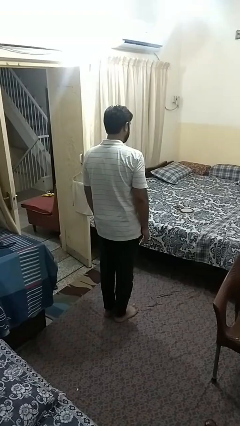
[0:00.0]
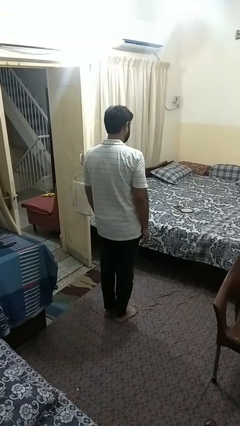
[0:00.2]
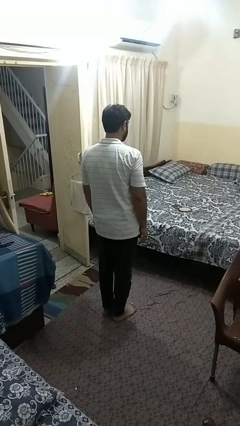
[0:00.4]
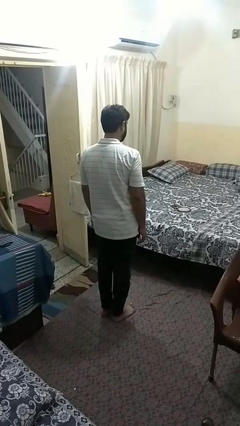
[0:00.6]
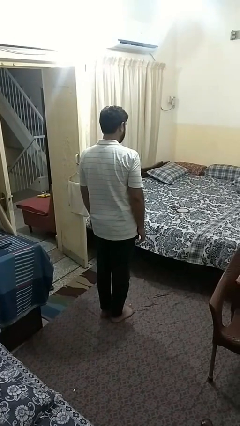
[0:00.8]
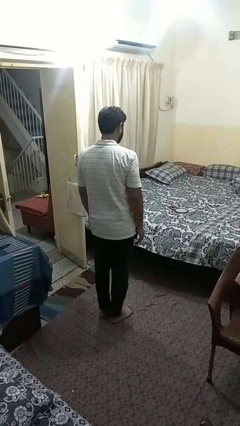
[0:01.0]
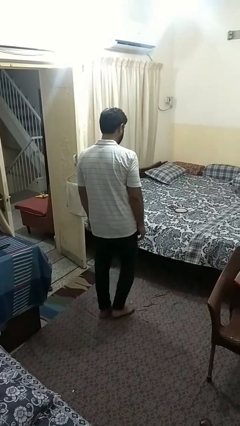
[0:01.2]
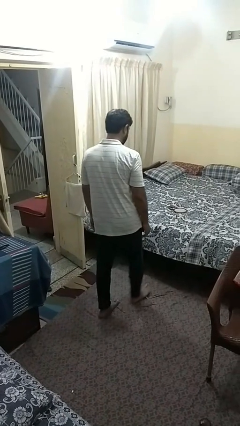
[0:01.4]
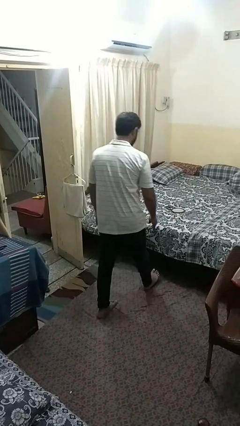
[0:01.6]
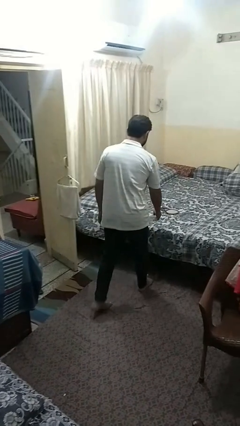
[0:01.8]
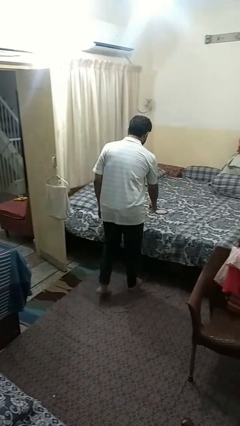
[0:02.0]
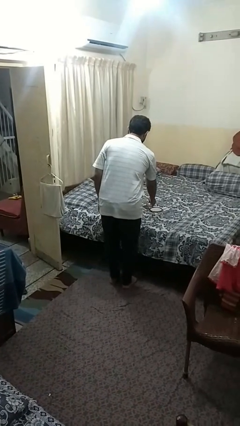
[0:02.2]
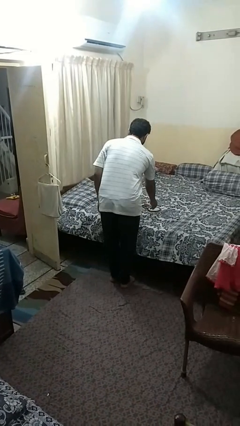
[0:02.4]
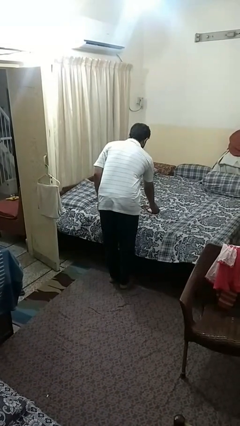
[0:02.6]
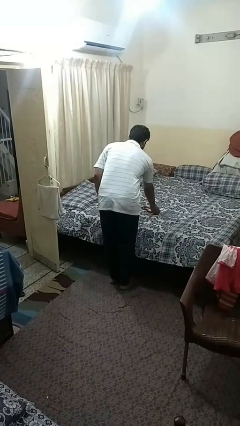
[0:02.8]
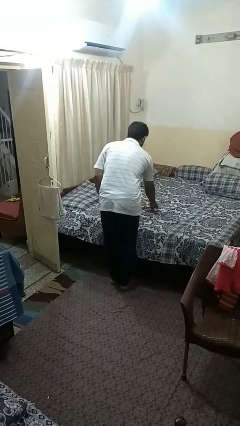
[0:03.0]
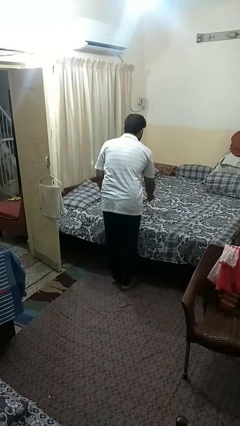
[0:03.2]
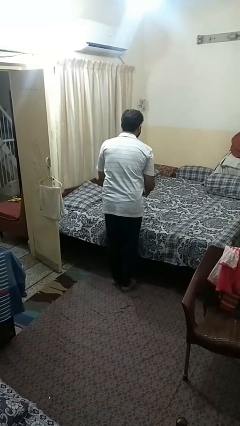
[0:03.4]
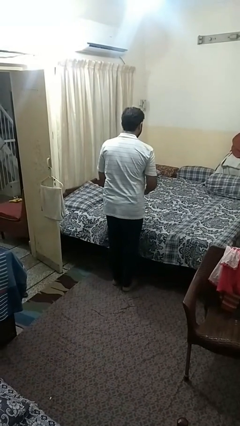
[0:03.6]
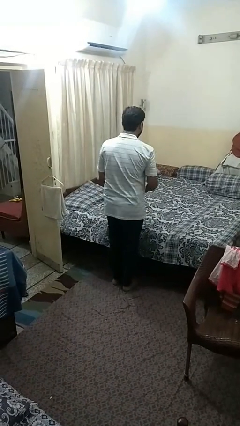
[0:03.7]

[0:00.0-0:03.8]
person picks up object from bed

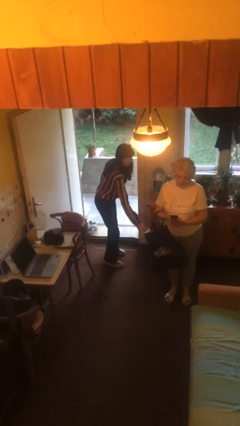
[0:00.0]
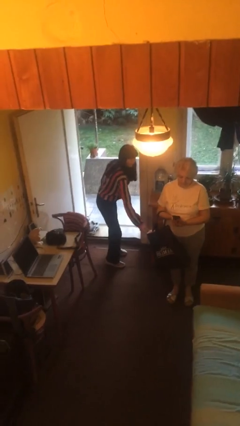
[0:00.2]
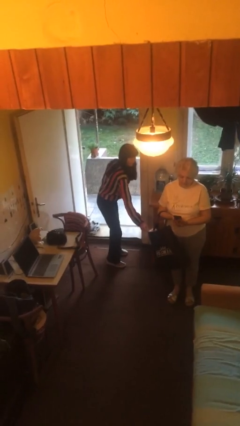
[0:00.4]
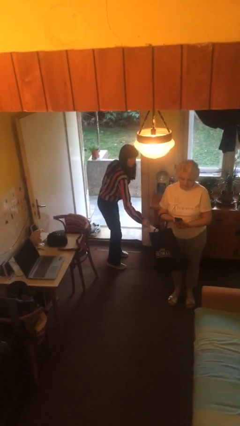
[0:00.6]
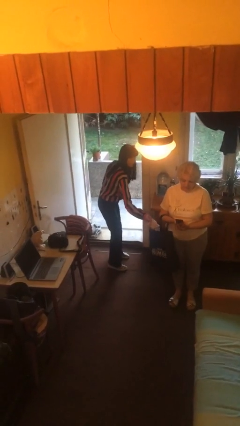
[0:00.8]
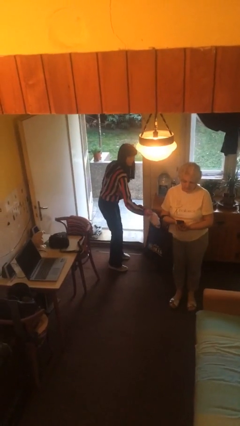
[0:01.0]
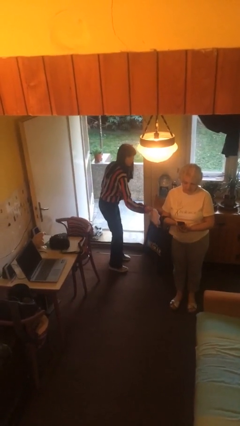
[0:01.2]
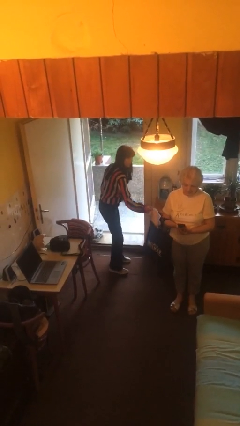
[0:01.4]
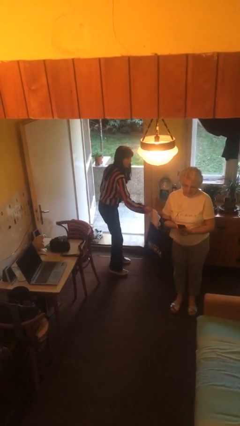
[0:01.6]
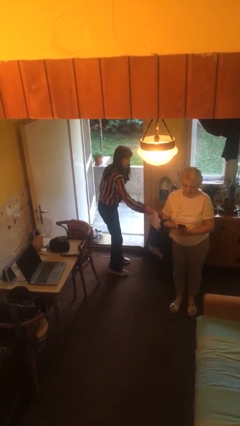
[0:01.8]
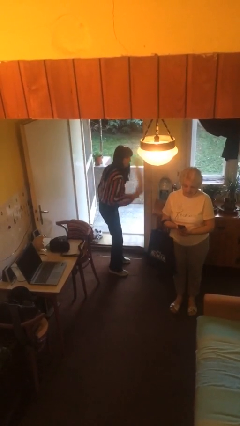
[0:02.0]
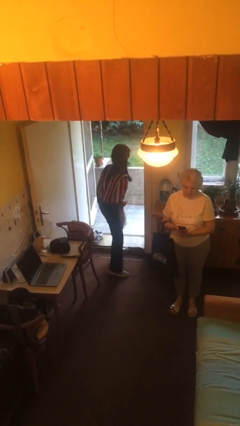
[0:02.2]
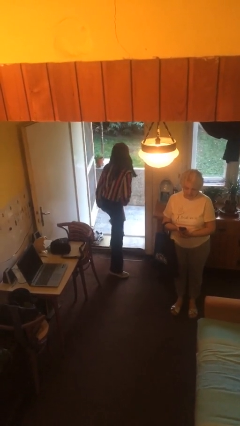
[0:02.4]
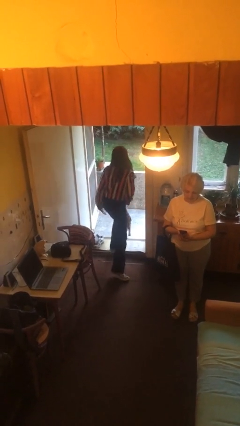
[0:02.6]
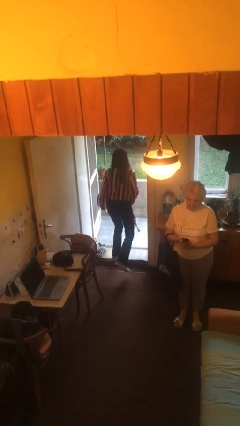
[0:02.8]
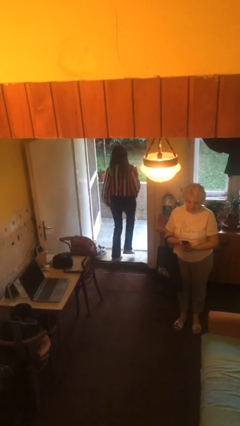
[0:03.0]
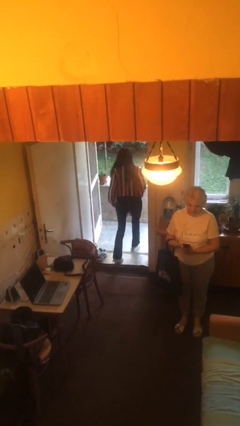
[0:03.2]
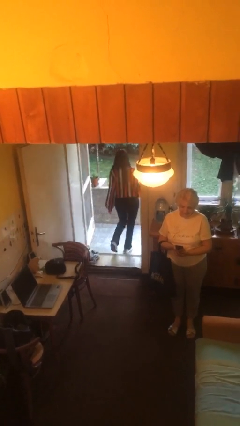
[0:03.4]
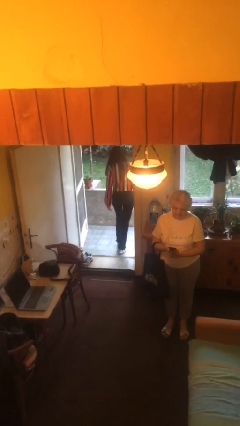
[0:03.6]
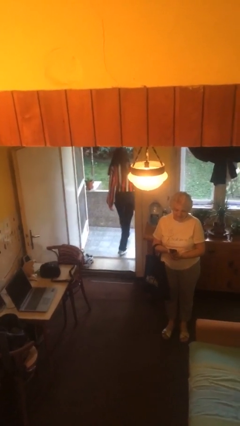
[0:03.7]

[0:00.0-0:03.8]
person steals object from person

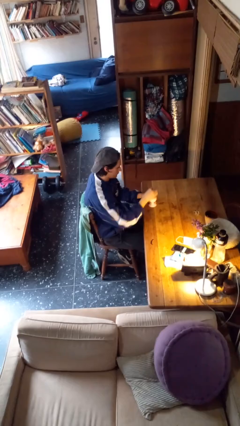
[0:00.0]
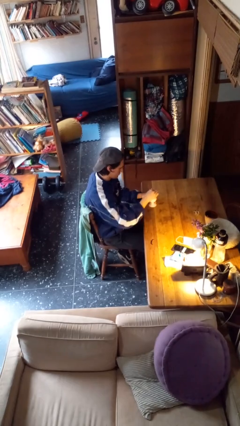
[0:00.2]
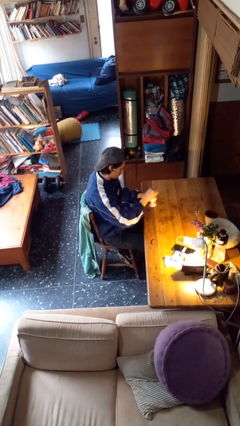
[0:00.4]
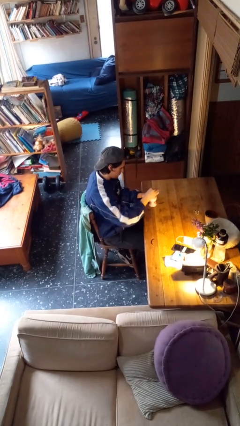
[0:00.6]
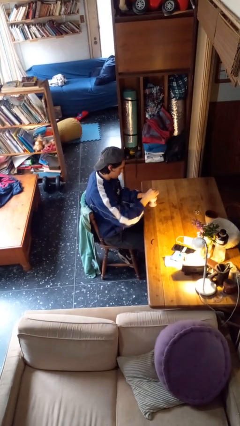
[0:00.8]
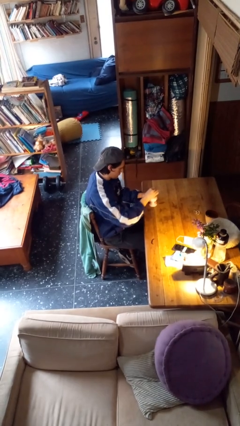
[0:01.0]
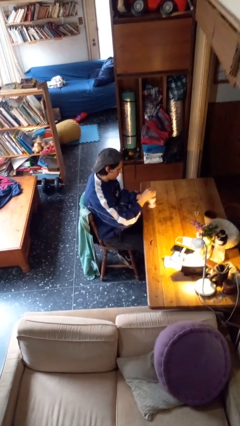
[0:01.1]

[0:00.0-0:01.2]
person stirs mug

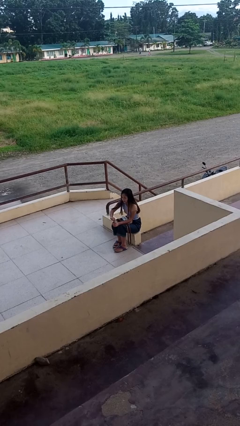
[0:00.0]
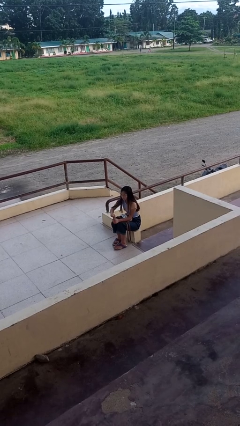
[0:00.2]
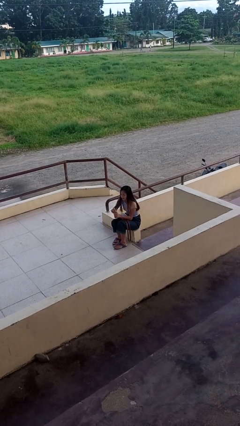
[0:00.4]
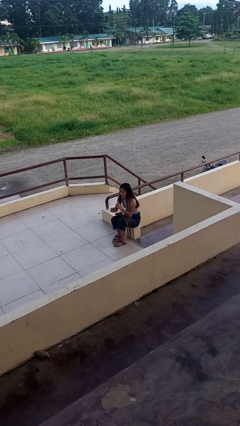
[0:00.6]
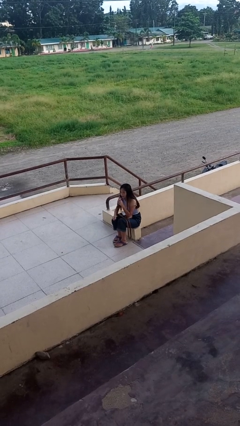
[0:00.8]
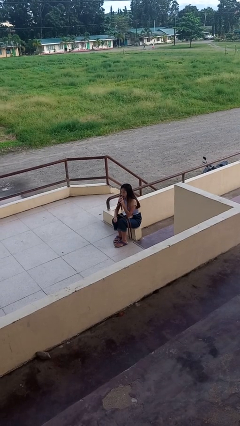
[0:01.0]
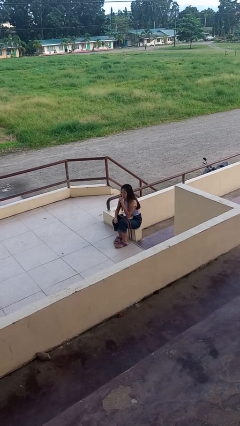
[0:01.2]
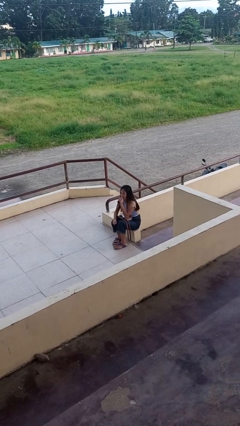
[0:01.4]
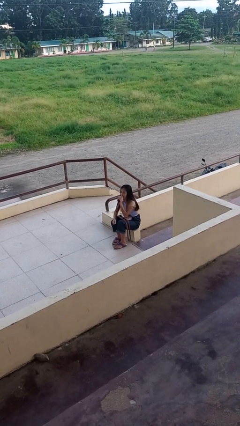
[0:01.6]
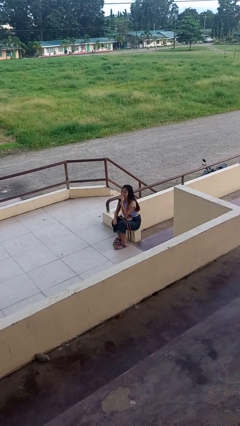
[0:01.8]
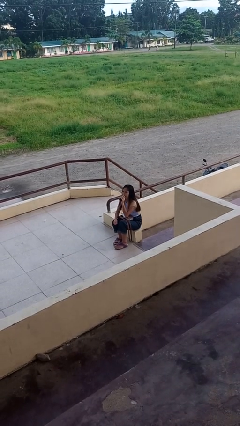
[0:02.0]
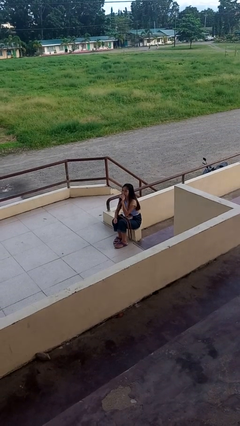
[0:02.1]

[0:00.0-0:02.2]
person drinks from beverage can

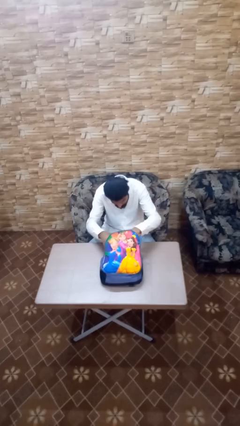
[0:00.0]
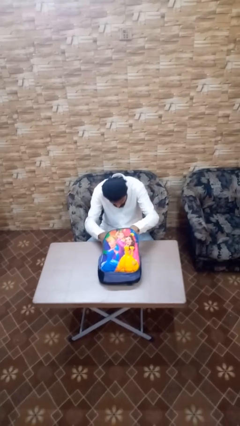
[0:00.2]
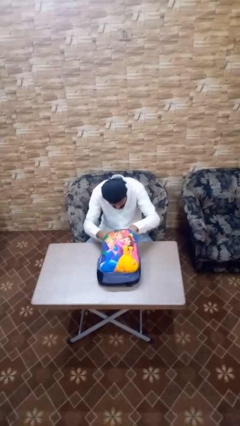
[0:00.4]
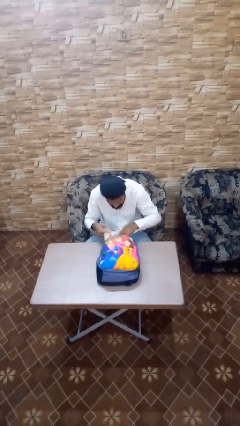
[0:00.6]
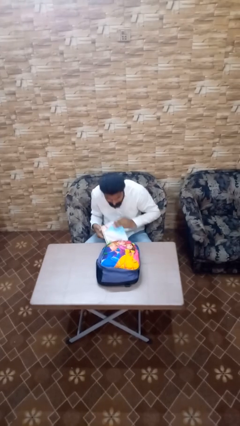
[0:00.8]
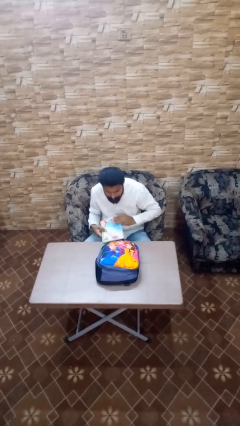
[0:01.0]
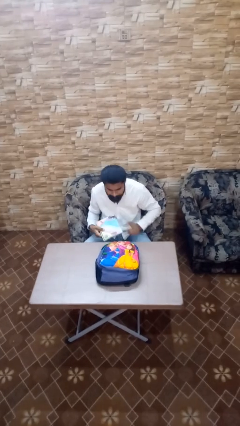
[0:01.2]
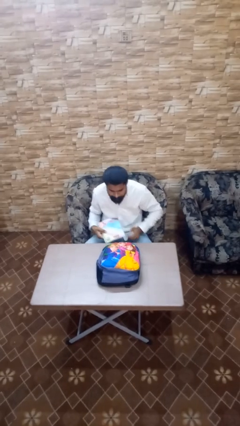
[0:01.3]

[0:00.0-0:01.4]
person takes object from backpack

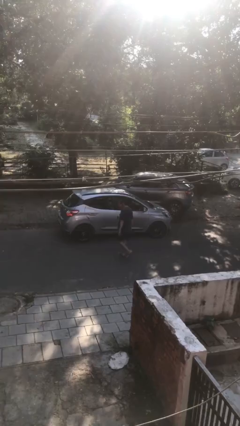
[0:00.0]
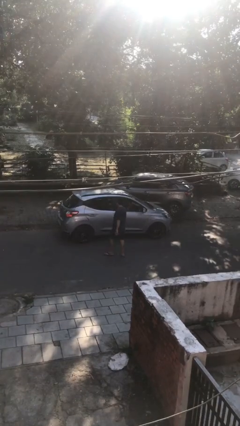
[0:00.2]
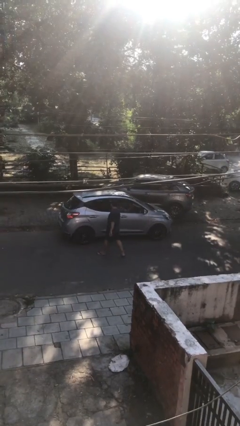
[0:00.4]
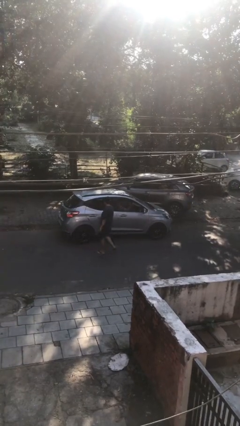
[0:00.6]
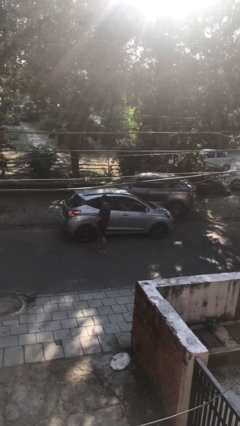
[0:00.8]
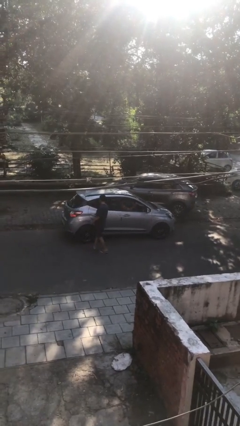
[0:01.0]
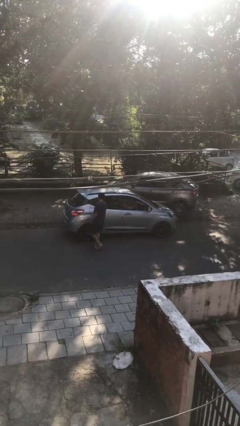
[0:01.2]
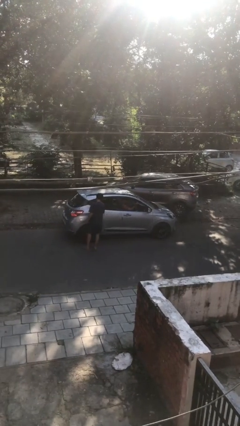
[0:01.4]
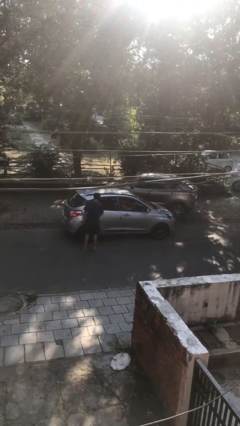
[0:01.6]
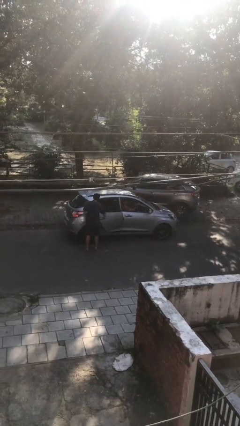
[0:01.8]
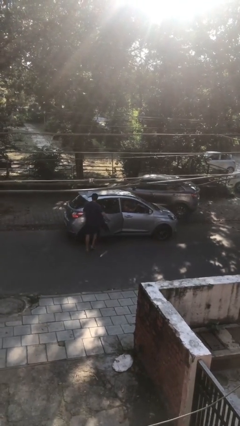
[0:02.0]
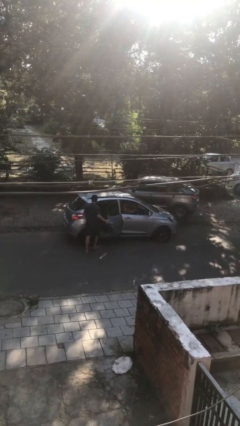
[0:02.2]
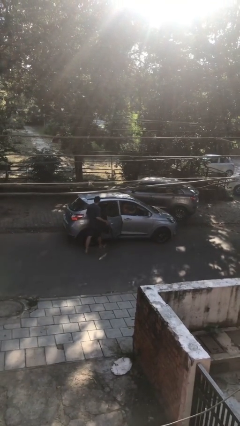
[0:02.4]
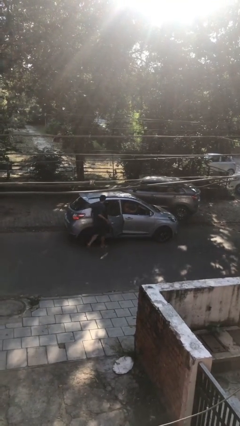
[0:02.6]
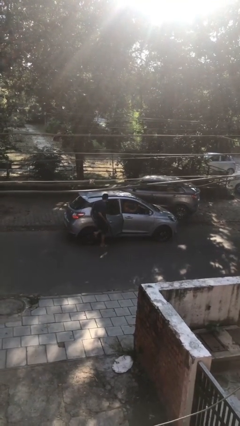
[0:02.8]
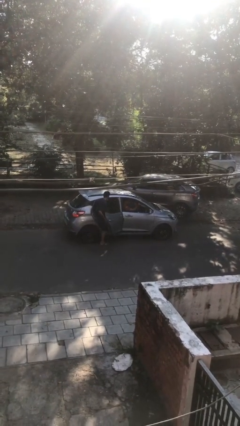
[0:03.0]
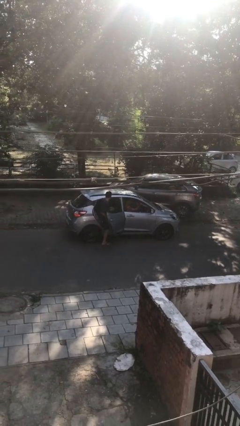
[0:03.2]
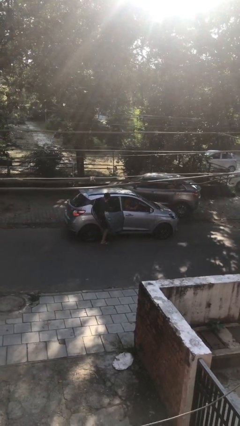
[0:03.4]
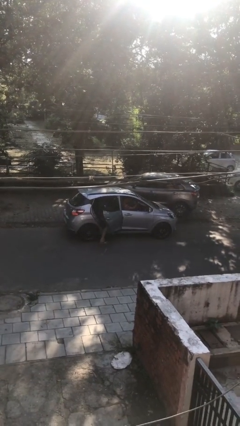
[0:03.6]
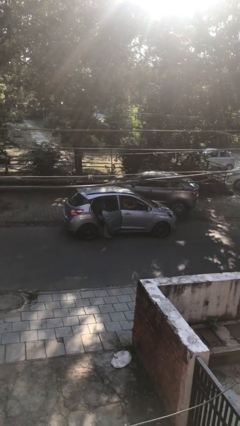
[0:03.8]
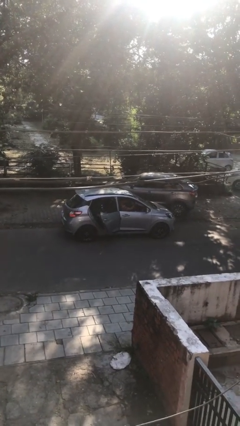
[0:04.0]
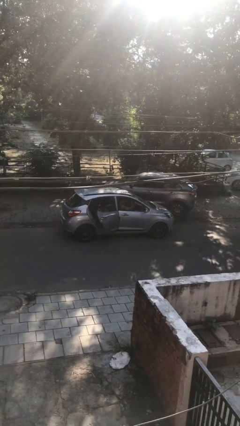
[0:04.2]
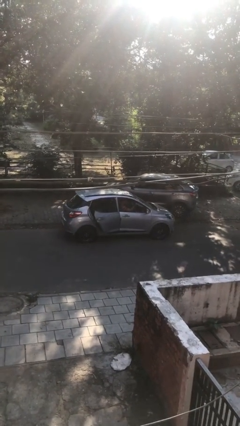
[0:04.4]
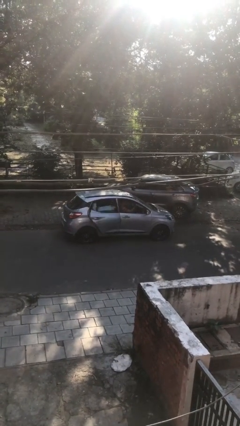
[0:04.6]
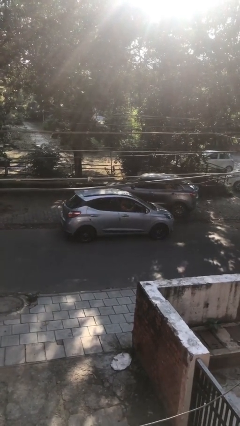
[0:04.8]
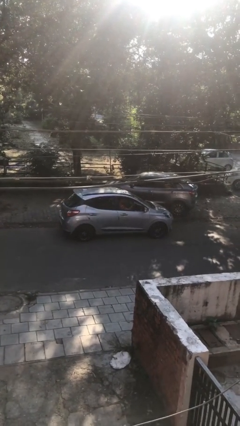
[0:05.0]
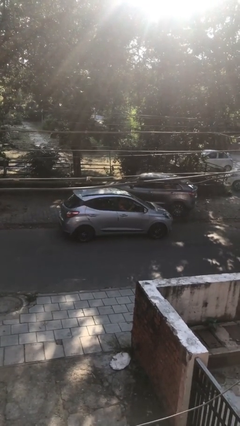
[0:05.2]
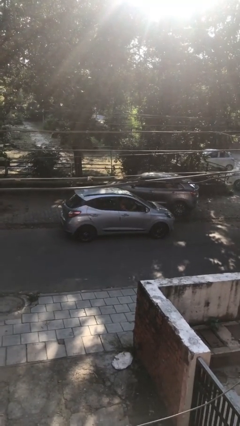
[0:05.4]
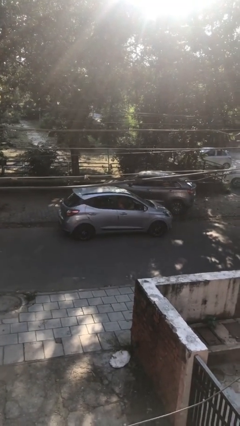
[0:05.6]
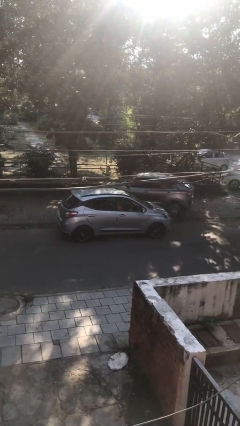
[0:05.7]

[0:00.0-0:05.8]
car picks up person
